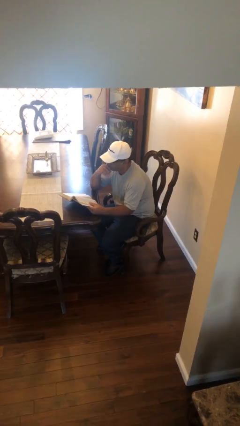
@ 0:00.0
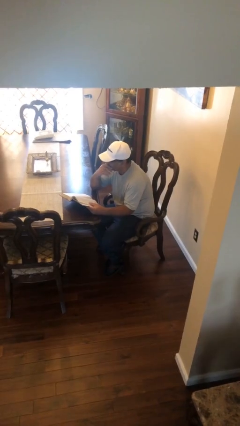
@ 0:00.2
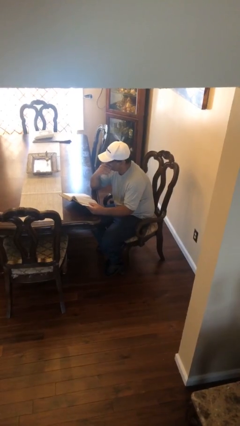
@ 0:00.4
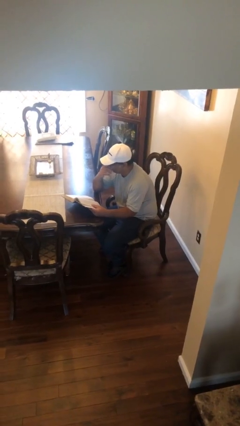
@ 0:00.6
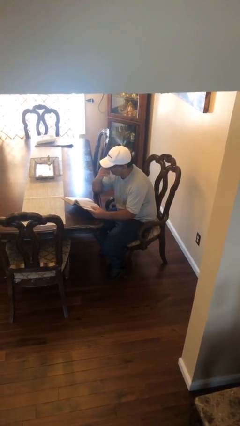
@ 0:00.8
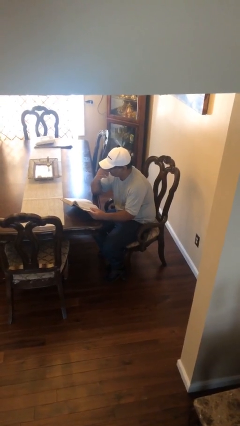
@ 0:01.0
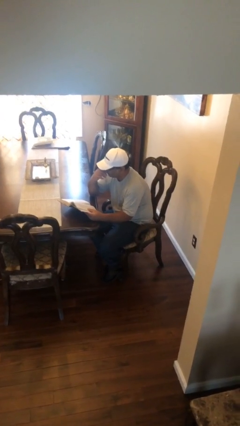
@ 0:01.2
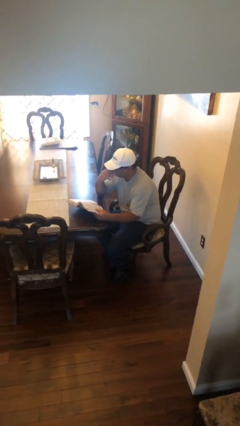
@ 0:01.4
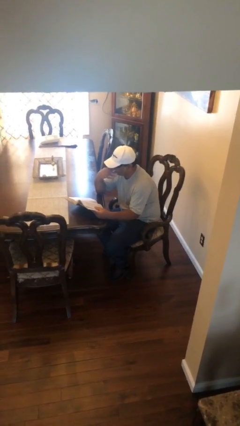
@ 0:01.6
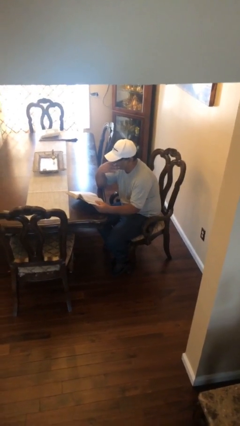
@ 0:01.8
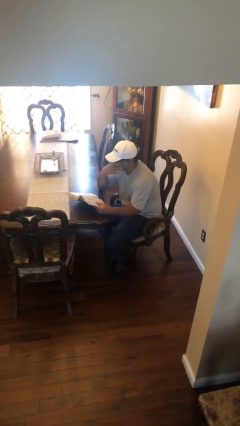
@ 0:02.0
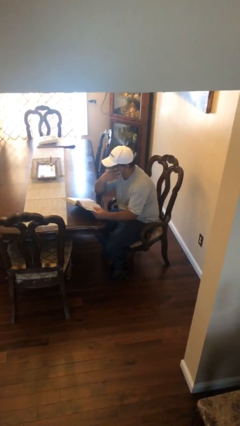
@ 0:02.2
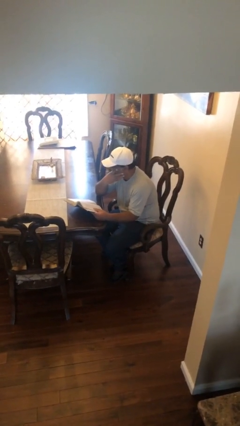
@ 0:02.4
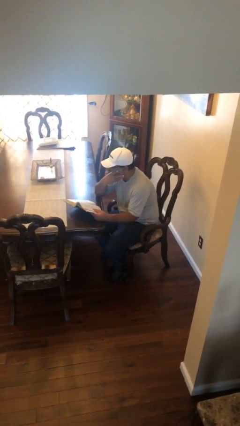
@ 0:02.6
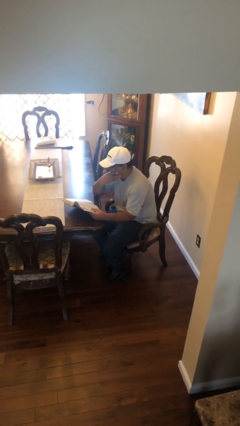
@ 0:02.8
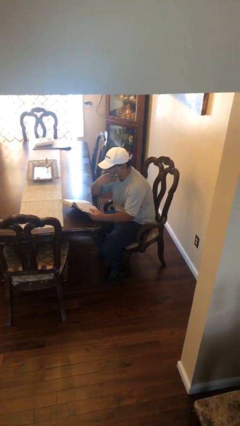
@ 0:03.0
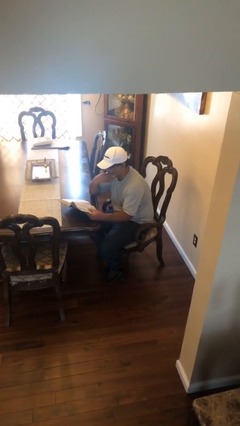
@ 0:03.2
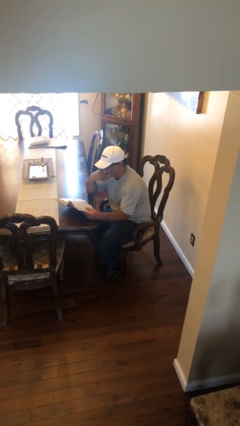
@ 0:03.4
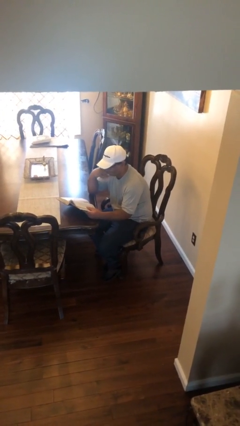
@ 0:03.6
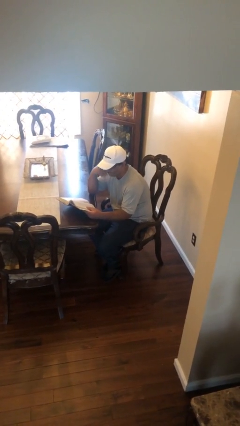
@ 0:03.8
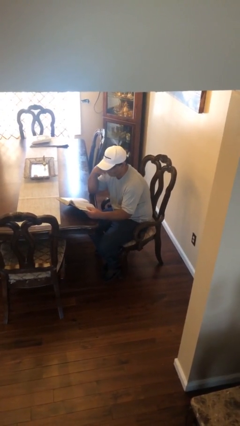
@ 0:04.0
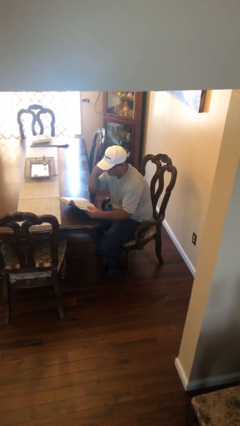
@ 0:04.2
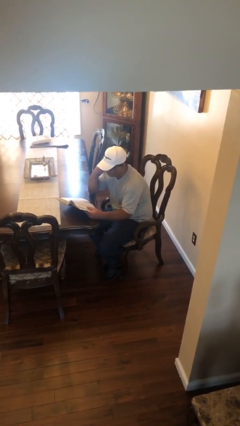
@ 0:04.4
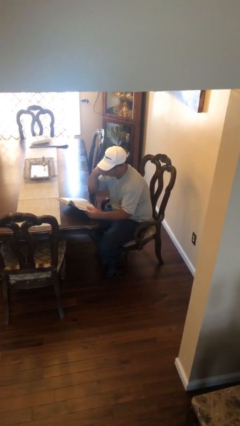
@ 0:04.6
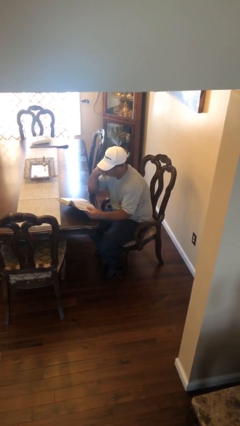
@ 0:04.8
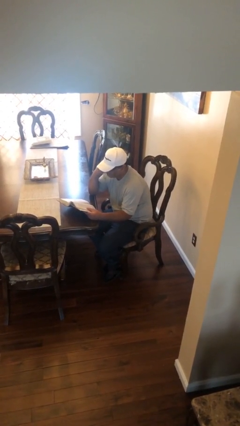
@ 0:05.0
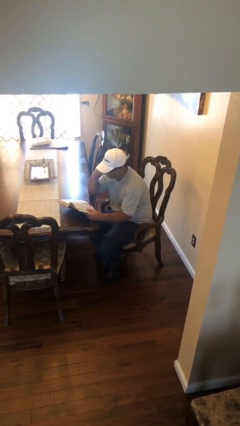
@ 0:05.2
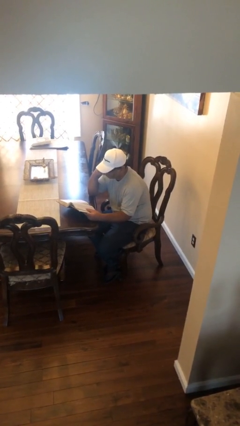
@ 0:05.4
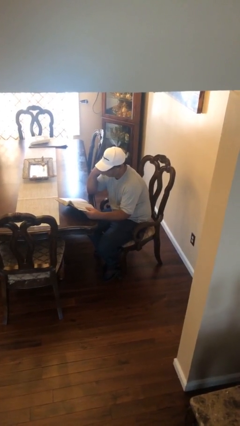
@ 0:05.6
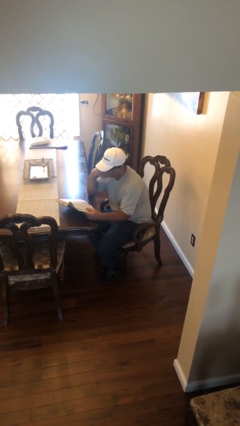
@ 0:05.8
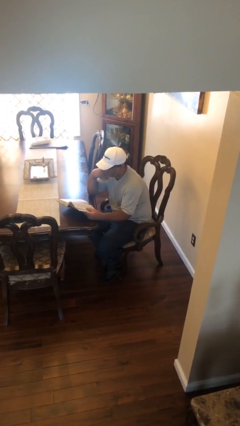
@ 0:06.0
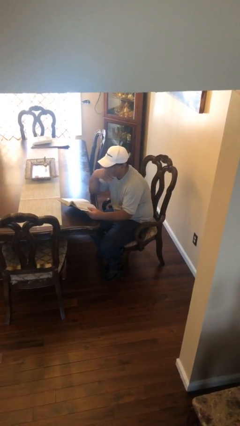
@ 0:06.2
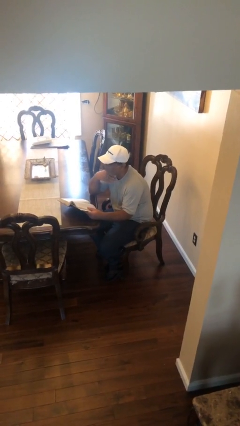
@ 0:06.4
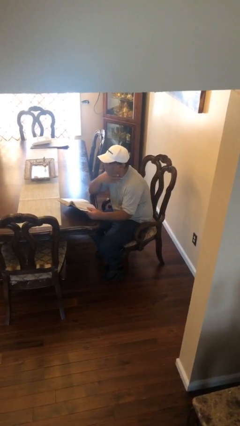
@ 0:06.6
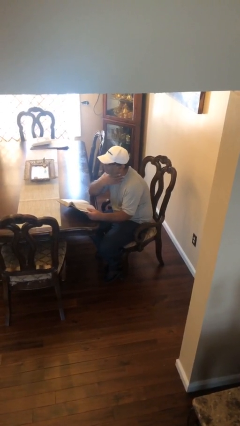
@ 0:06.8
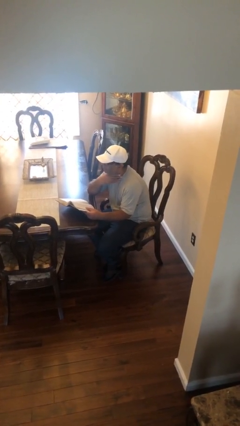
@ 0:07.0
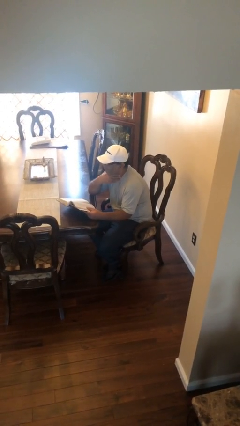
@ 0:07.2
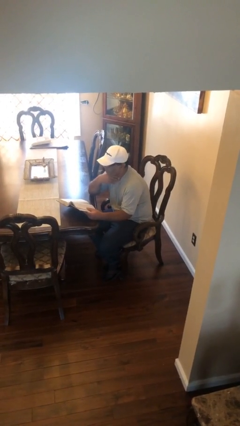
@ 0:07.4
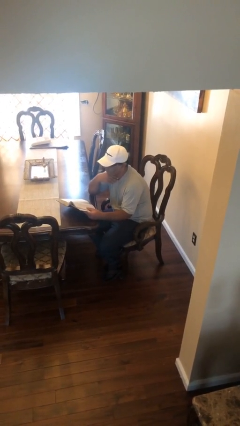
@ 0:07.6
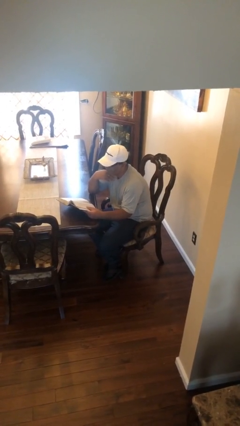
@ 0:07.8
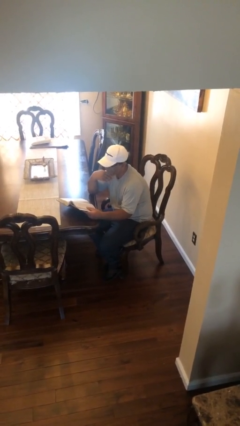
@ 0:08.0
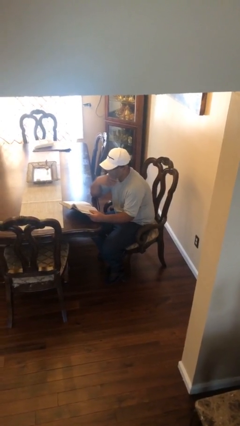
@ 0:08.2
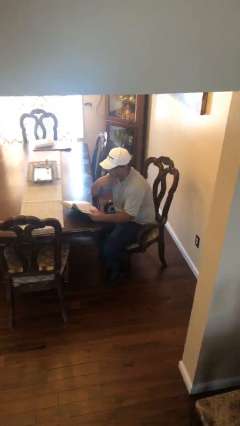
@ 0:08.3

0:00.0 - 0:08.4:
person reads document

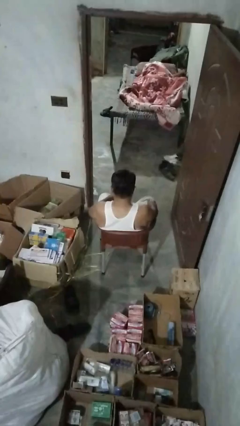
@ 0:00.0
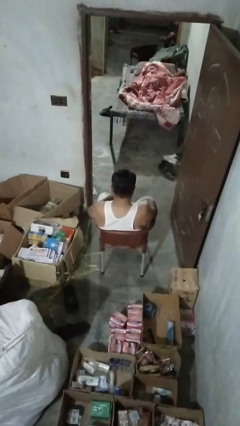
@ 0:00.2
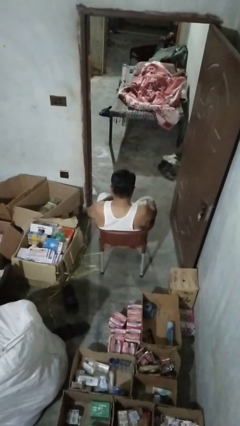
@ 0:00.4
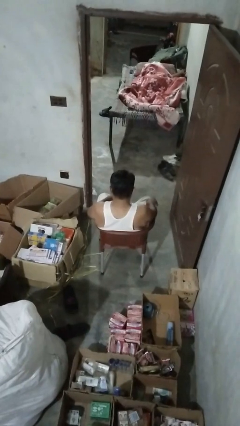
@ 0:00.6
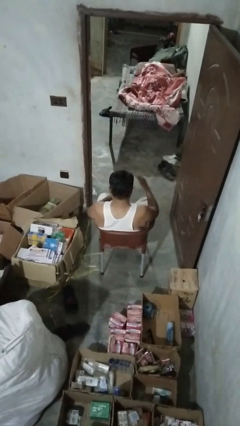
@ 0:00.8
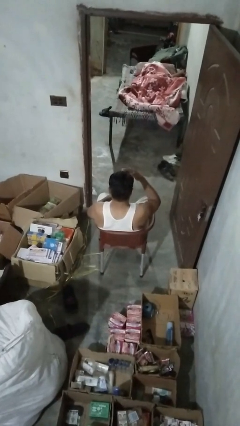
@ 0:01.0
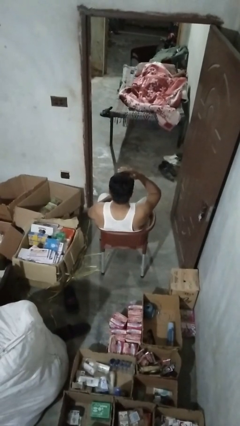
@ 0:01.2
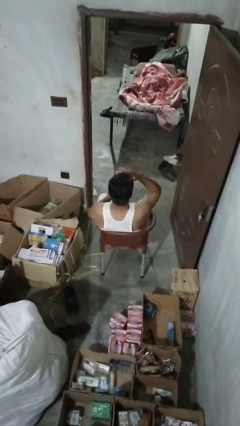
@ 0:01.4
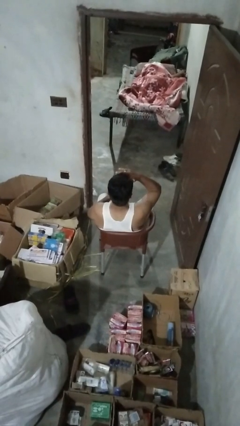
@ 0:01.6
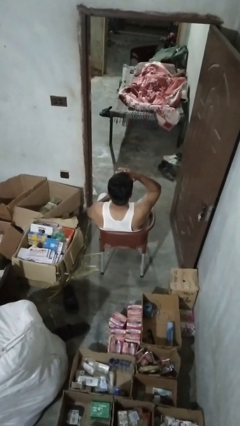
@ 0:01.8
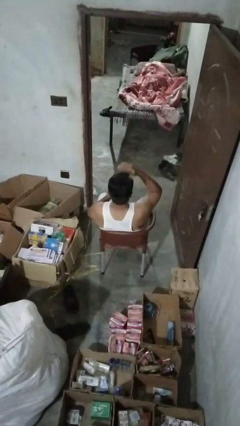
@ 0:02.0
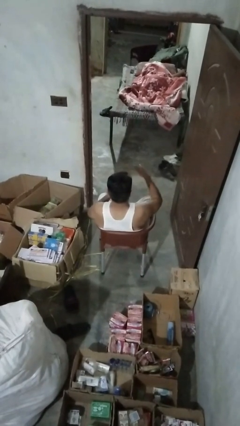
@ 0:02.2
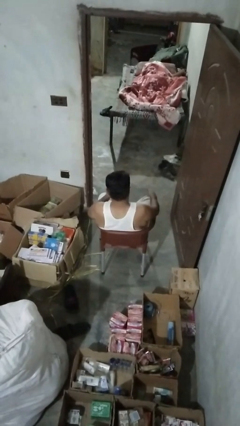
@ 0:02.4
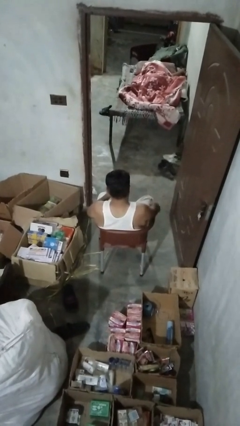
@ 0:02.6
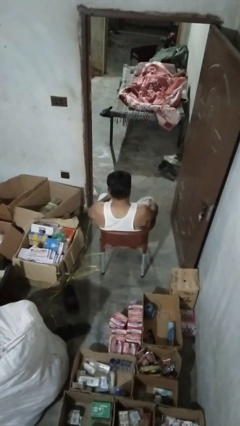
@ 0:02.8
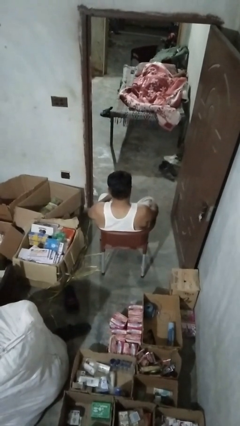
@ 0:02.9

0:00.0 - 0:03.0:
person shades eyes

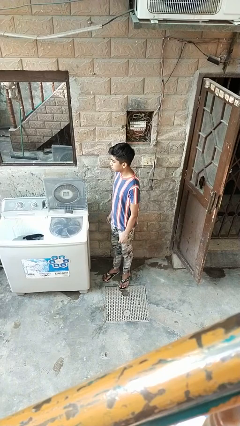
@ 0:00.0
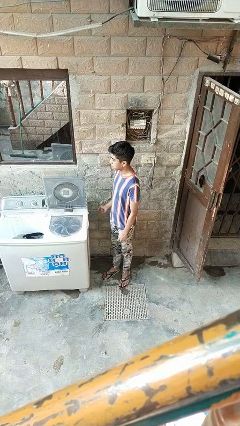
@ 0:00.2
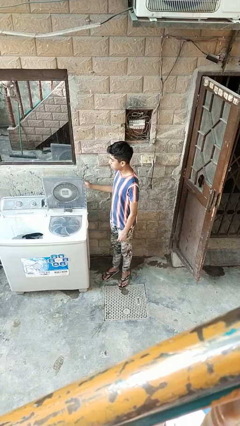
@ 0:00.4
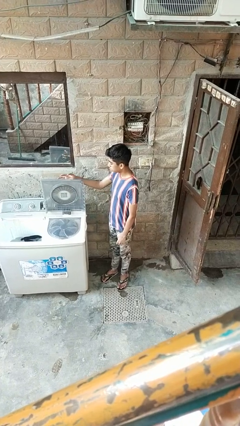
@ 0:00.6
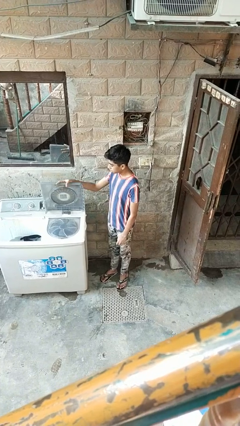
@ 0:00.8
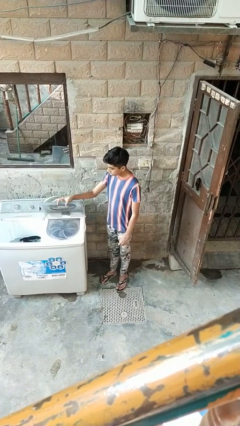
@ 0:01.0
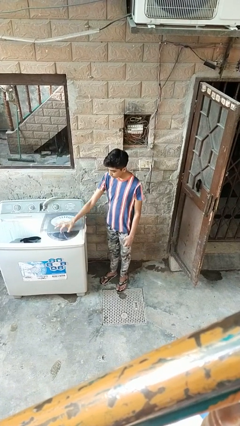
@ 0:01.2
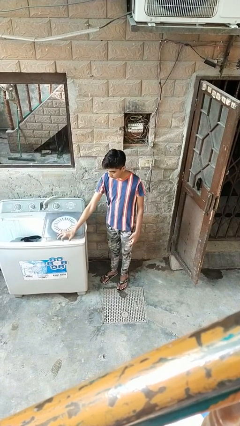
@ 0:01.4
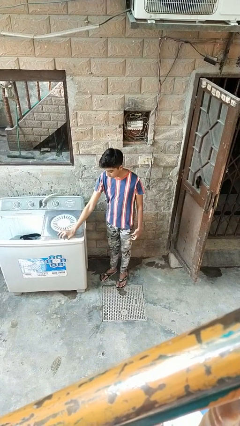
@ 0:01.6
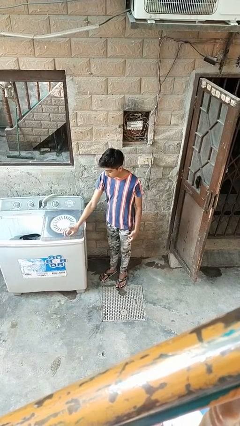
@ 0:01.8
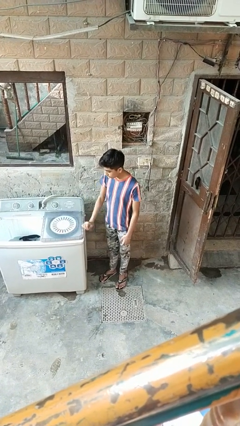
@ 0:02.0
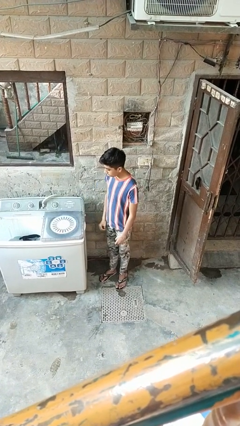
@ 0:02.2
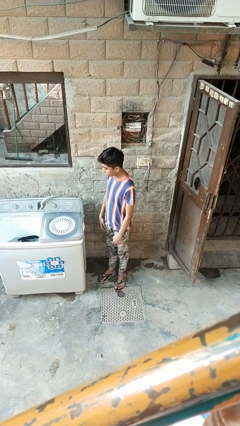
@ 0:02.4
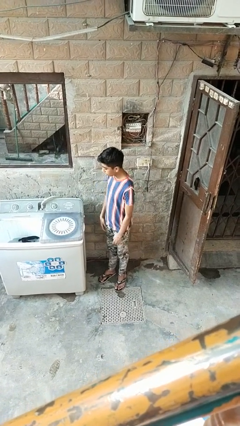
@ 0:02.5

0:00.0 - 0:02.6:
person closes clothes washer

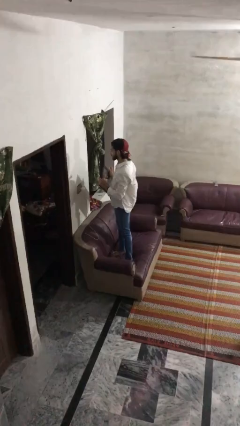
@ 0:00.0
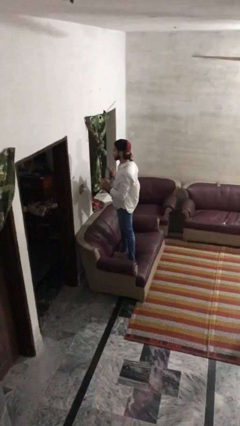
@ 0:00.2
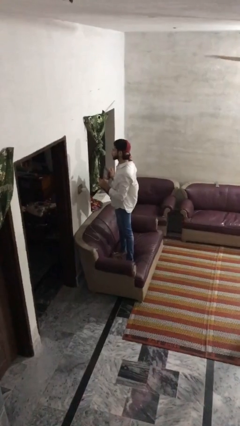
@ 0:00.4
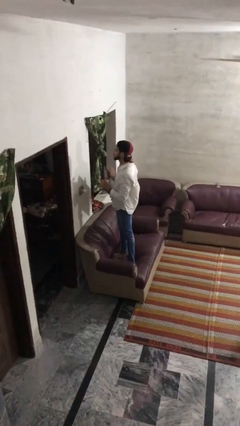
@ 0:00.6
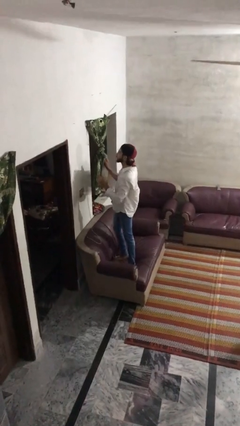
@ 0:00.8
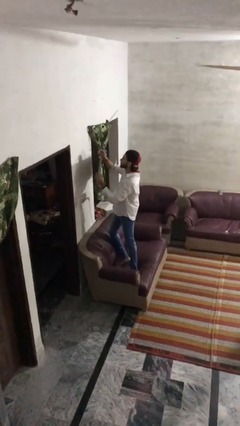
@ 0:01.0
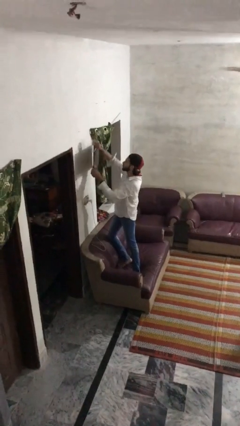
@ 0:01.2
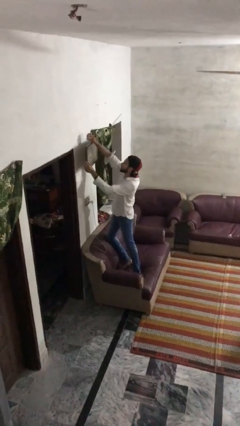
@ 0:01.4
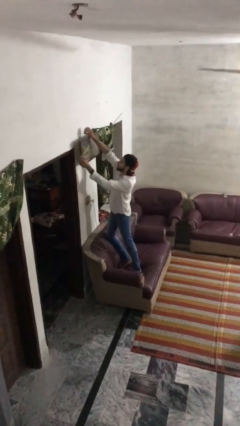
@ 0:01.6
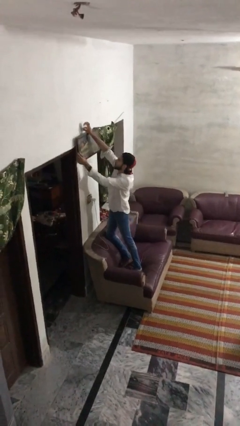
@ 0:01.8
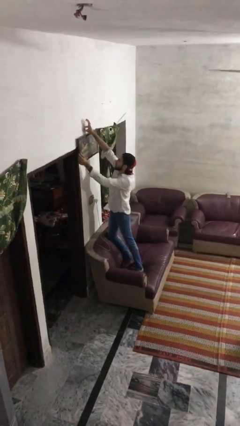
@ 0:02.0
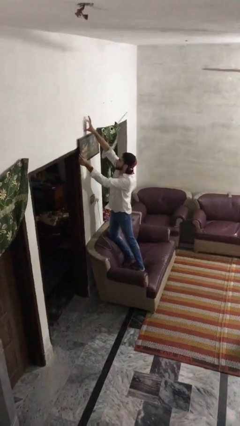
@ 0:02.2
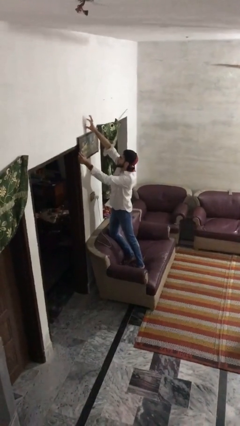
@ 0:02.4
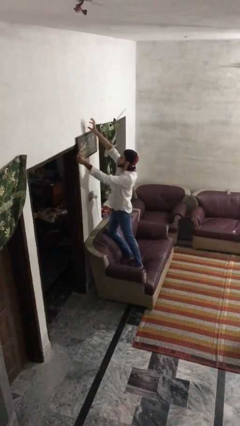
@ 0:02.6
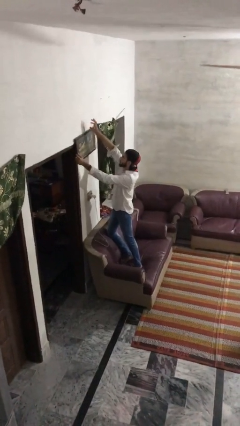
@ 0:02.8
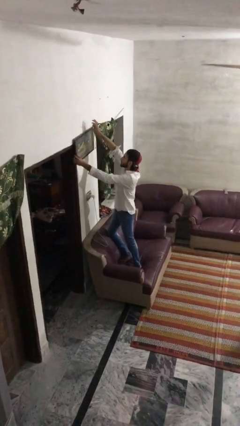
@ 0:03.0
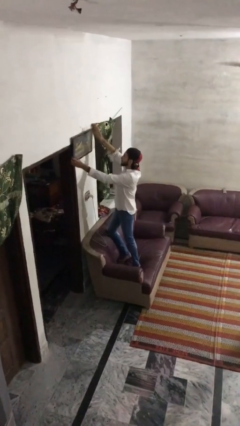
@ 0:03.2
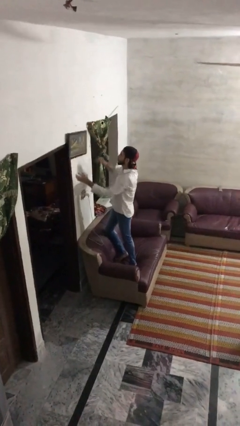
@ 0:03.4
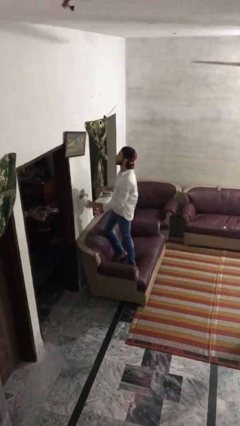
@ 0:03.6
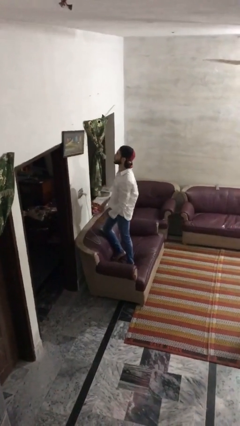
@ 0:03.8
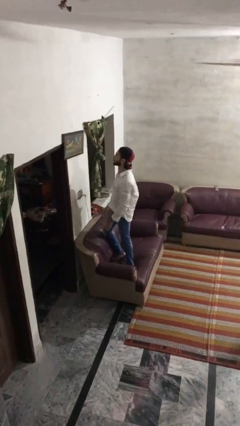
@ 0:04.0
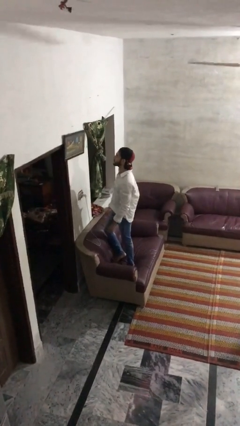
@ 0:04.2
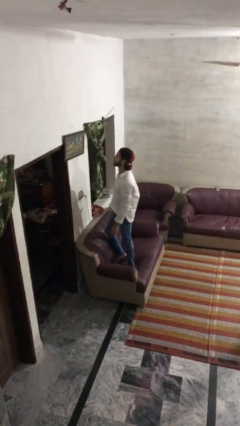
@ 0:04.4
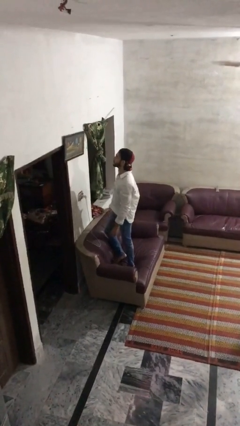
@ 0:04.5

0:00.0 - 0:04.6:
person puts up picture frame
